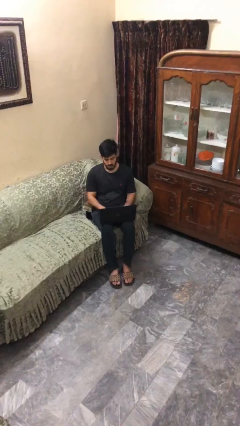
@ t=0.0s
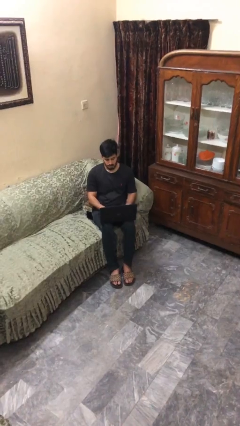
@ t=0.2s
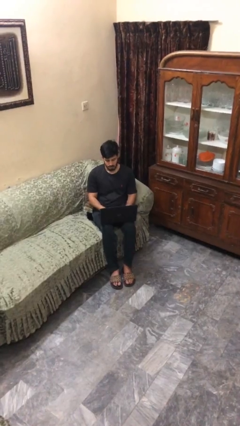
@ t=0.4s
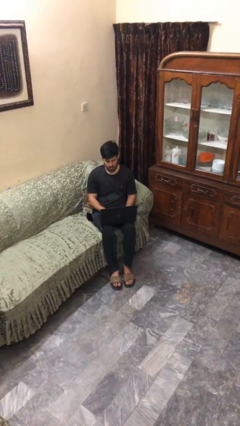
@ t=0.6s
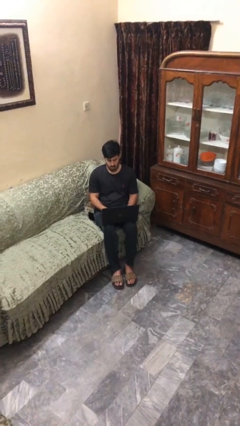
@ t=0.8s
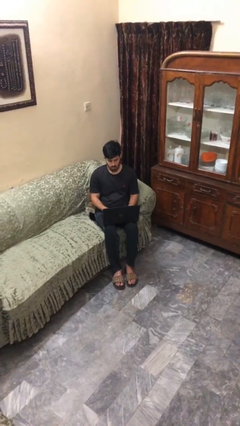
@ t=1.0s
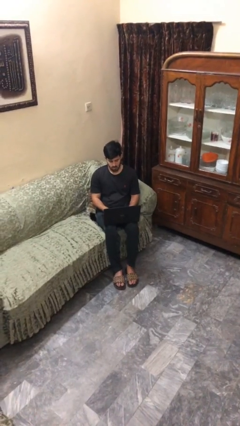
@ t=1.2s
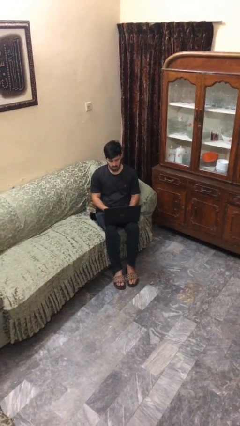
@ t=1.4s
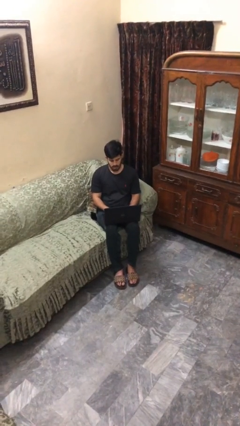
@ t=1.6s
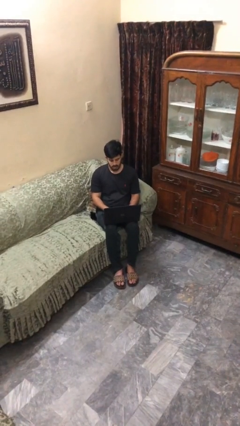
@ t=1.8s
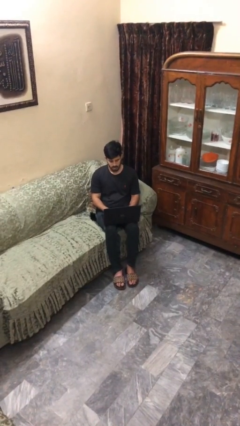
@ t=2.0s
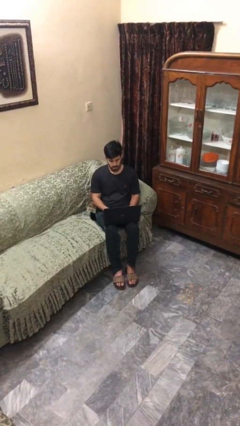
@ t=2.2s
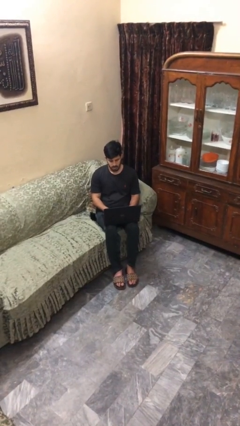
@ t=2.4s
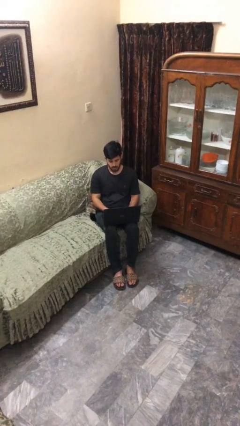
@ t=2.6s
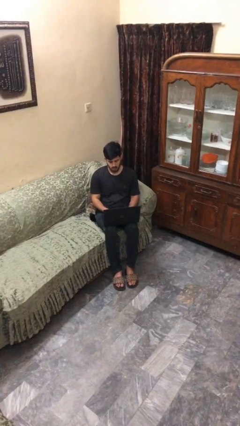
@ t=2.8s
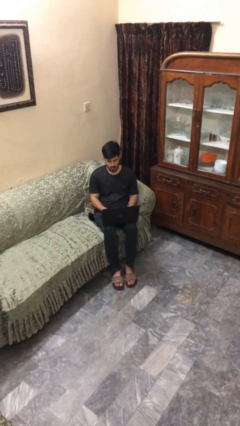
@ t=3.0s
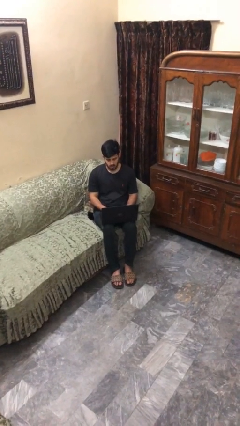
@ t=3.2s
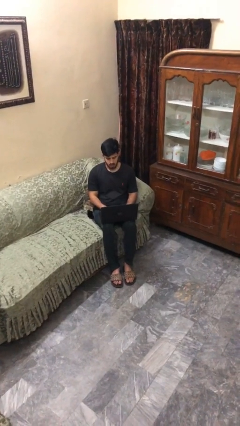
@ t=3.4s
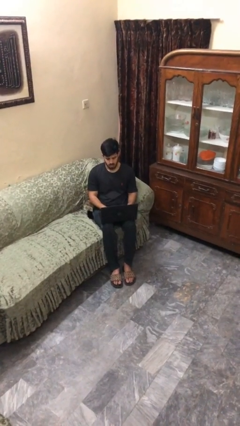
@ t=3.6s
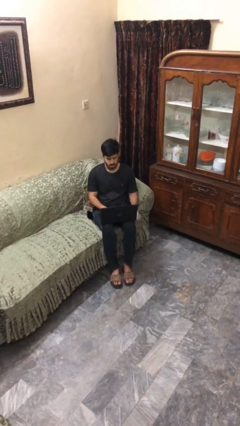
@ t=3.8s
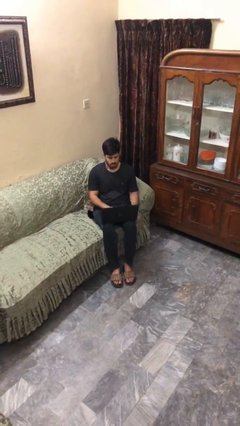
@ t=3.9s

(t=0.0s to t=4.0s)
person interacts with laptop

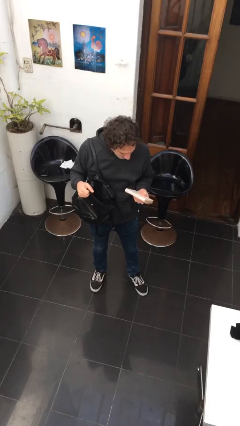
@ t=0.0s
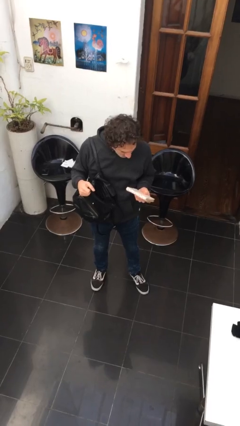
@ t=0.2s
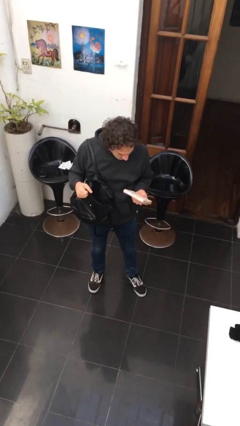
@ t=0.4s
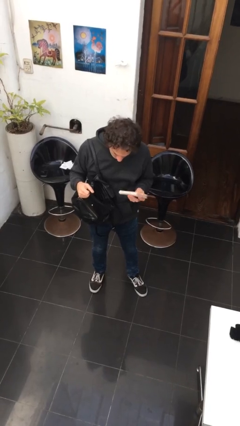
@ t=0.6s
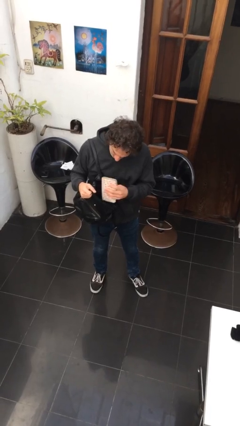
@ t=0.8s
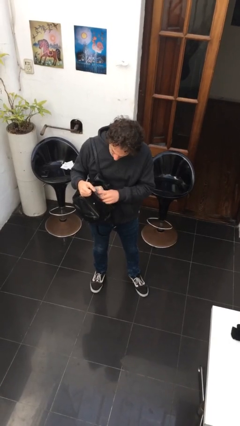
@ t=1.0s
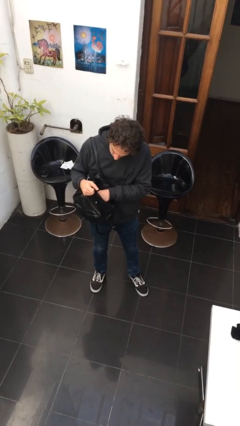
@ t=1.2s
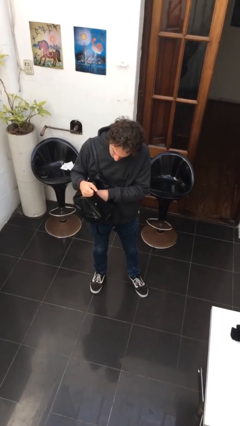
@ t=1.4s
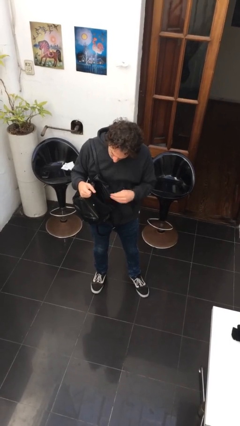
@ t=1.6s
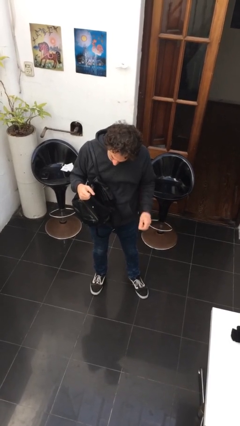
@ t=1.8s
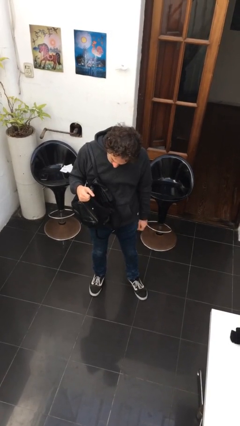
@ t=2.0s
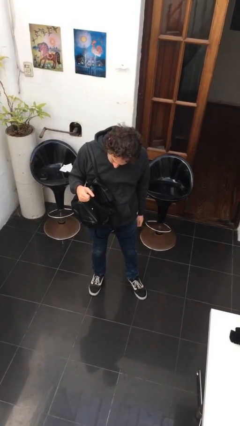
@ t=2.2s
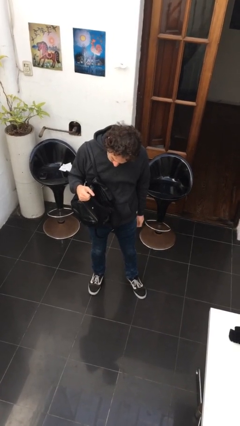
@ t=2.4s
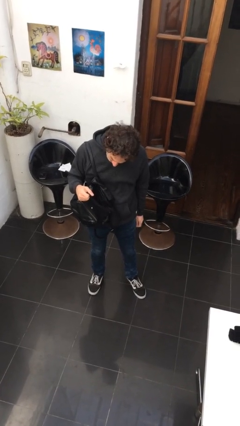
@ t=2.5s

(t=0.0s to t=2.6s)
person puts object into purse

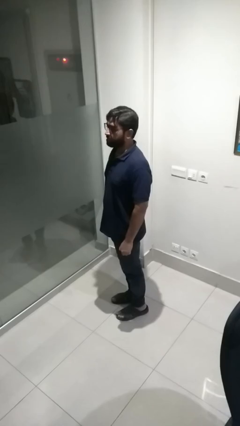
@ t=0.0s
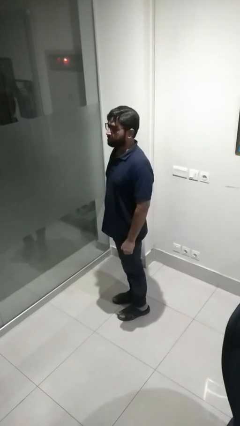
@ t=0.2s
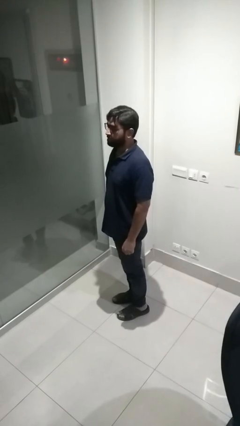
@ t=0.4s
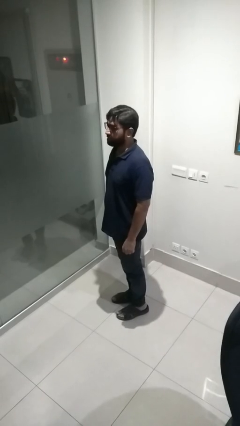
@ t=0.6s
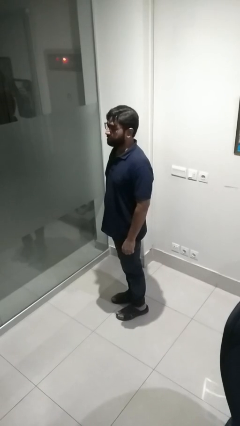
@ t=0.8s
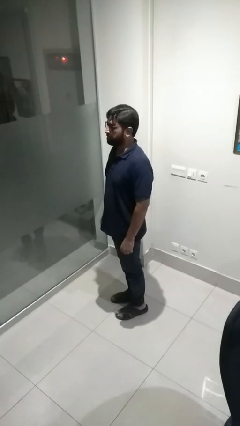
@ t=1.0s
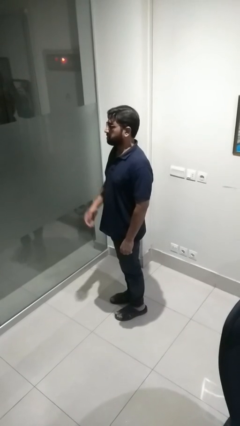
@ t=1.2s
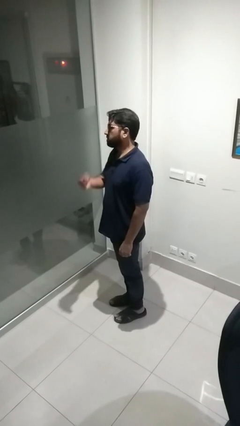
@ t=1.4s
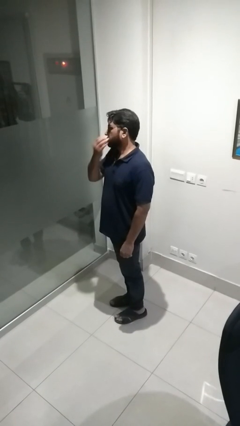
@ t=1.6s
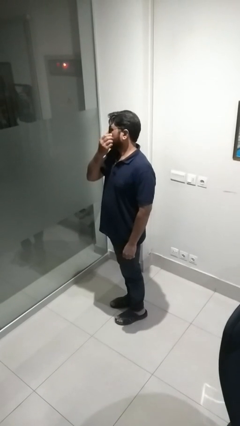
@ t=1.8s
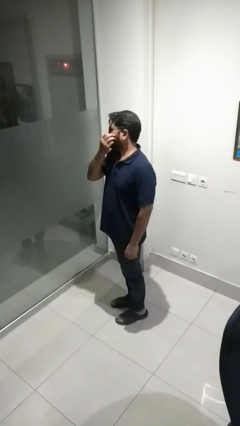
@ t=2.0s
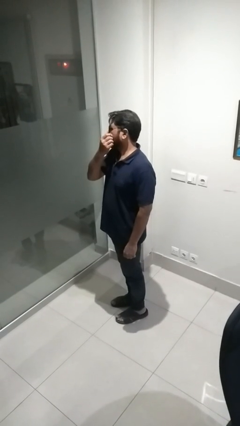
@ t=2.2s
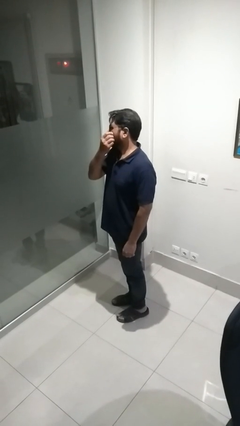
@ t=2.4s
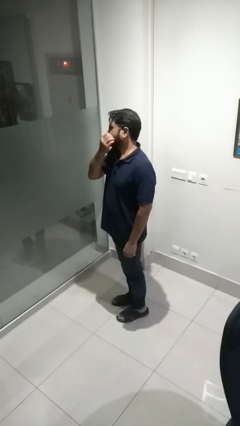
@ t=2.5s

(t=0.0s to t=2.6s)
person scratches face

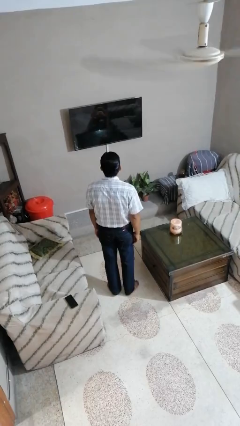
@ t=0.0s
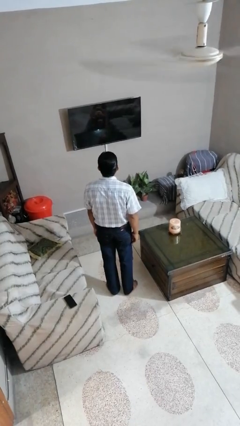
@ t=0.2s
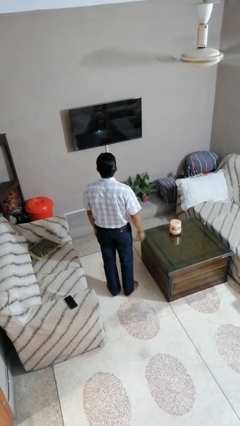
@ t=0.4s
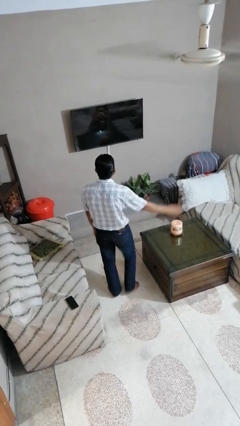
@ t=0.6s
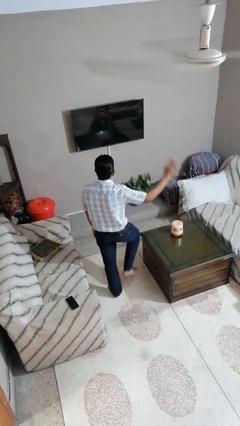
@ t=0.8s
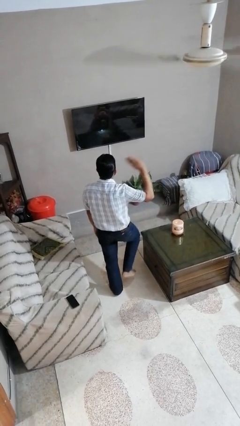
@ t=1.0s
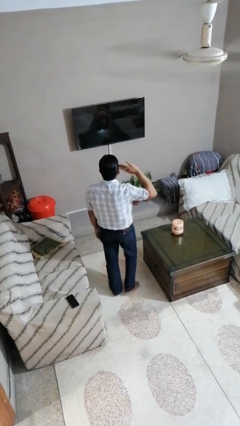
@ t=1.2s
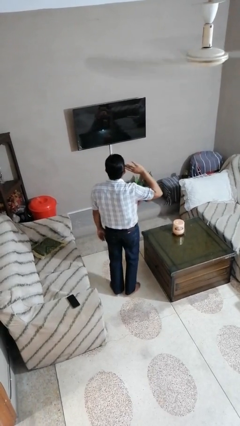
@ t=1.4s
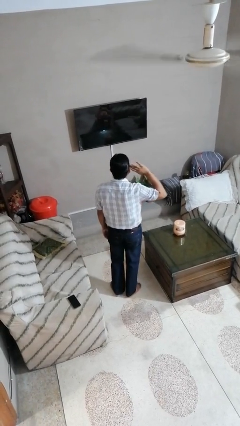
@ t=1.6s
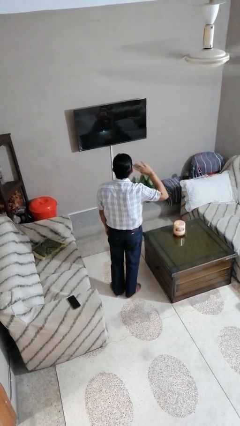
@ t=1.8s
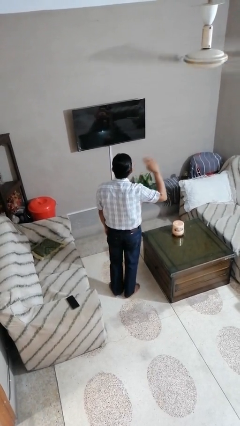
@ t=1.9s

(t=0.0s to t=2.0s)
person salutes

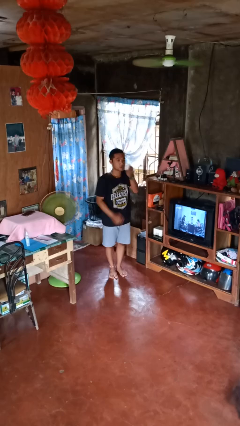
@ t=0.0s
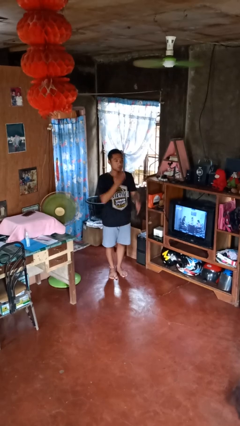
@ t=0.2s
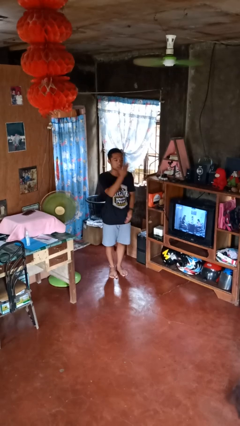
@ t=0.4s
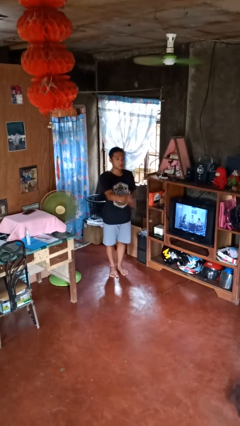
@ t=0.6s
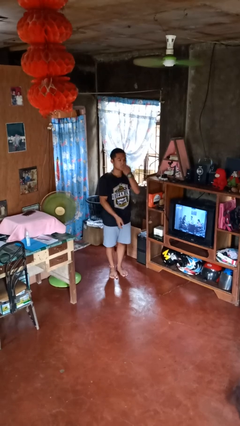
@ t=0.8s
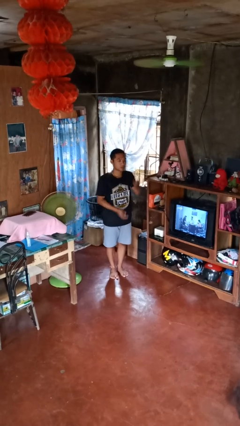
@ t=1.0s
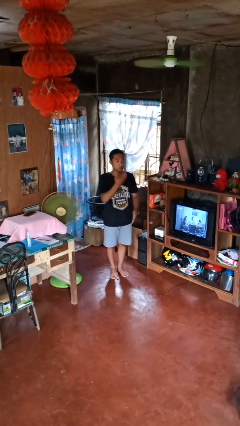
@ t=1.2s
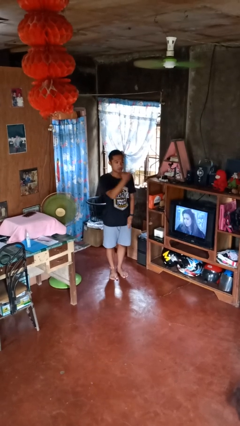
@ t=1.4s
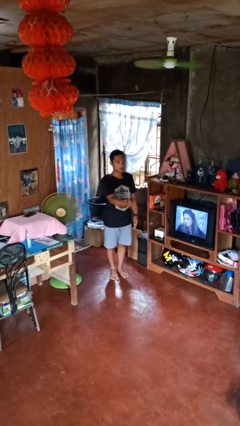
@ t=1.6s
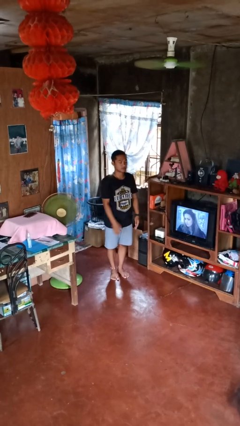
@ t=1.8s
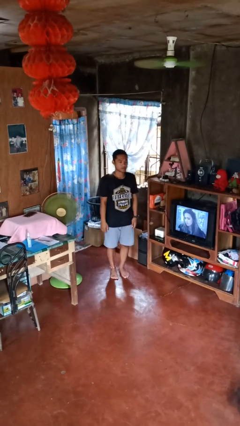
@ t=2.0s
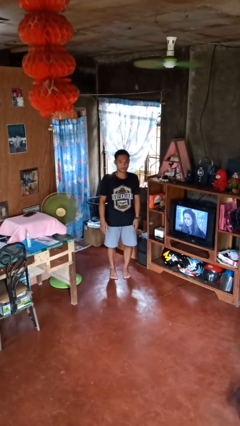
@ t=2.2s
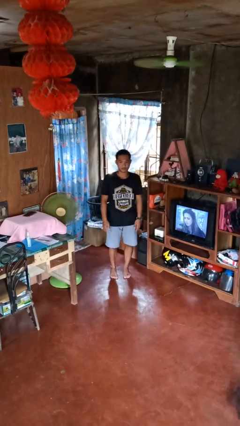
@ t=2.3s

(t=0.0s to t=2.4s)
person gestures blow kiss

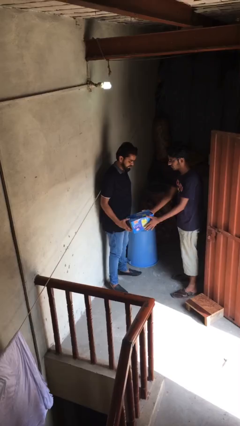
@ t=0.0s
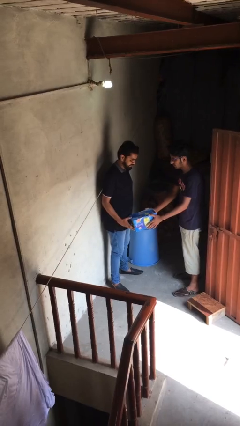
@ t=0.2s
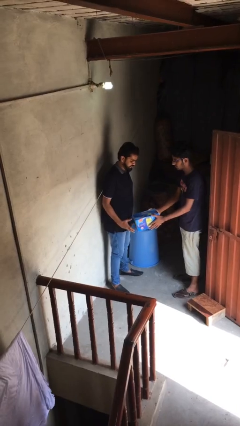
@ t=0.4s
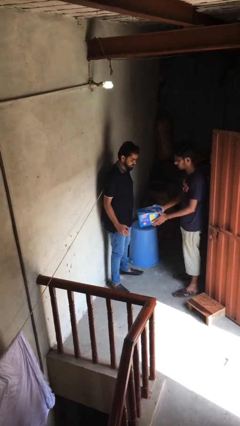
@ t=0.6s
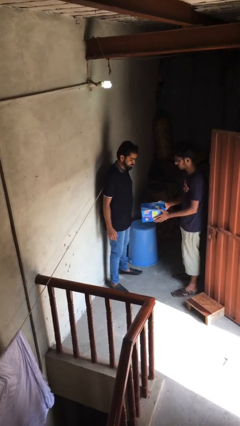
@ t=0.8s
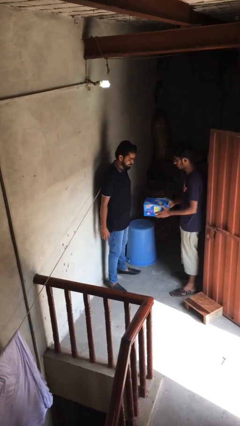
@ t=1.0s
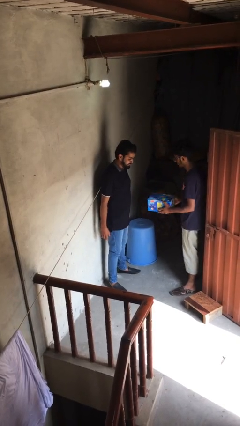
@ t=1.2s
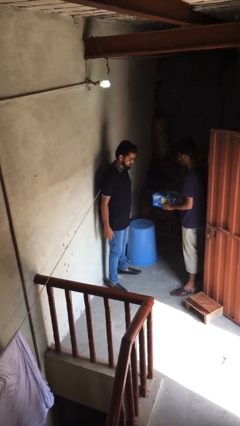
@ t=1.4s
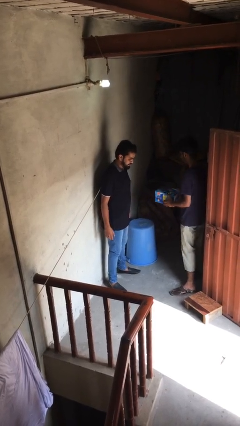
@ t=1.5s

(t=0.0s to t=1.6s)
person transfers object to person

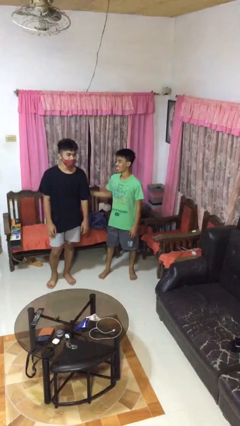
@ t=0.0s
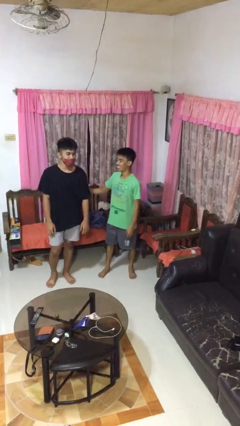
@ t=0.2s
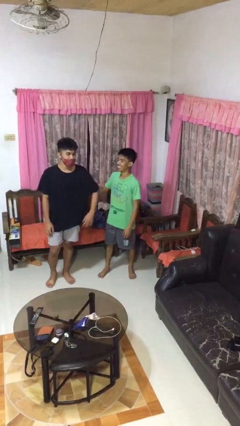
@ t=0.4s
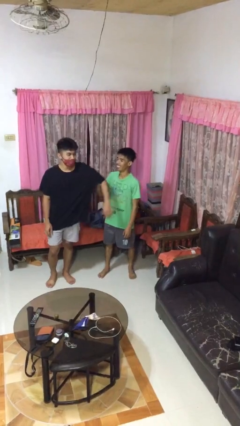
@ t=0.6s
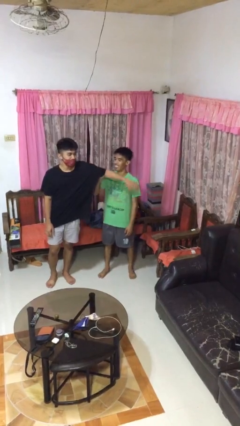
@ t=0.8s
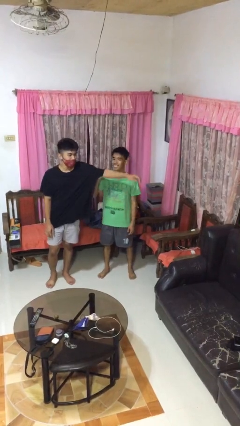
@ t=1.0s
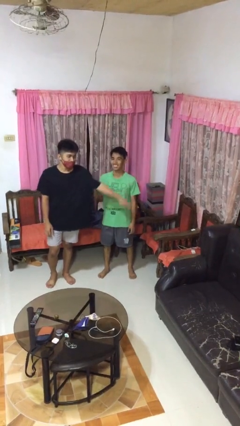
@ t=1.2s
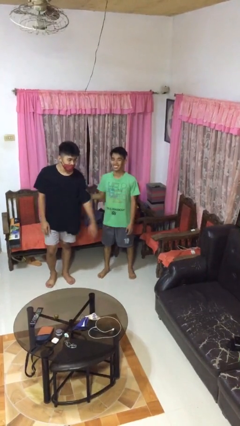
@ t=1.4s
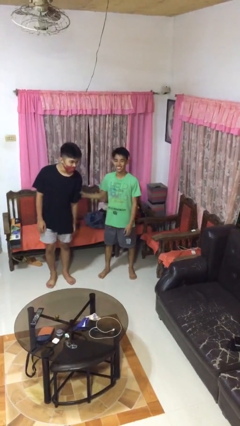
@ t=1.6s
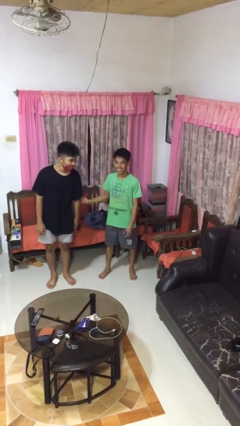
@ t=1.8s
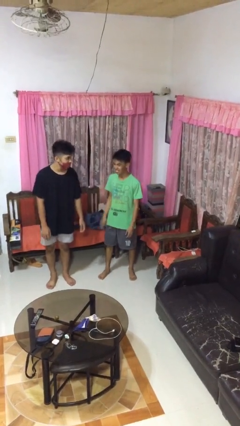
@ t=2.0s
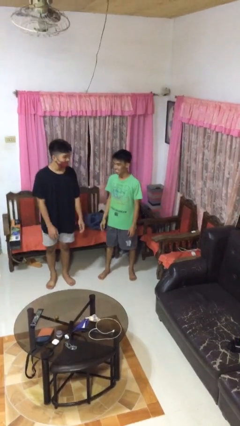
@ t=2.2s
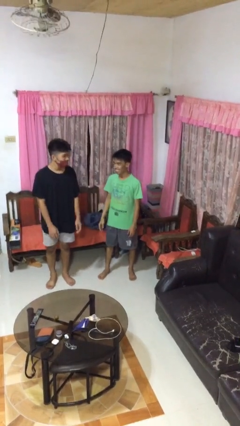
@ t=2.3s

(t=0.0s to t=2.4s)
person grabs person by bicep
